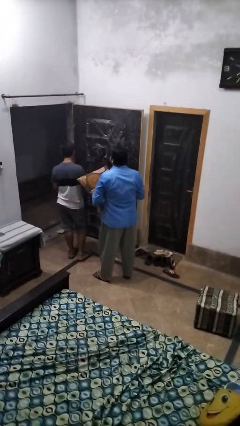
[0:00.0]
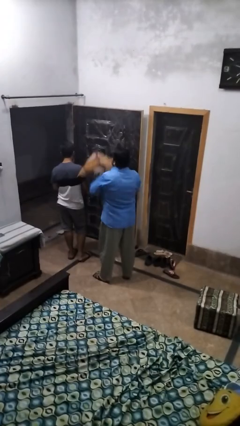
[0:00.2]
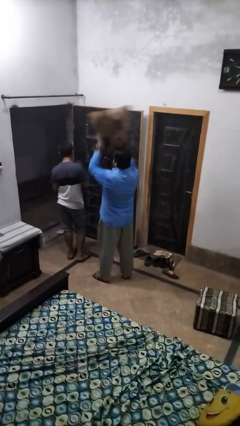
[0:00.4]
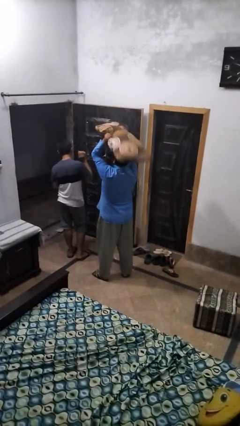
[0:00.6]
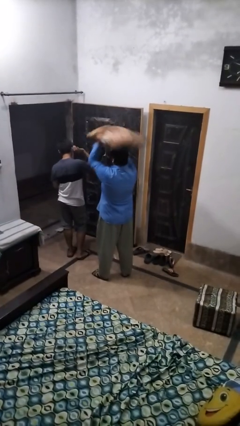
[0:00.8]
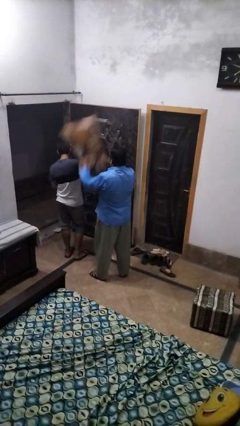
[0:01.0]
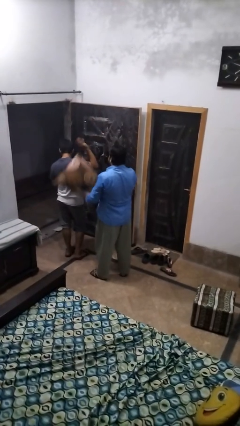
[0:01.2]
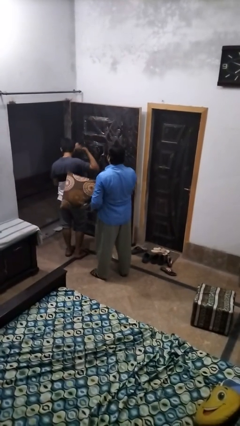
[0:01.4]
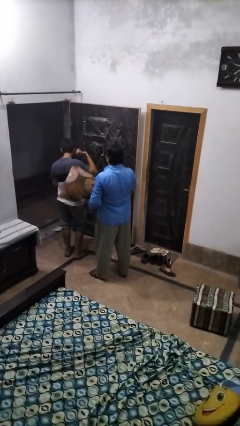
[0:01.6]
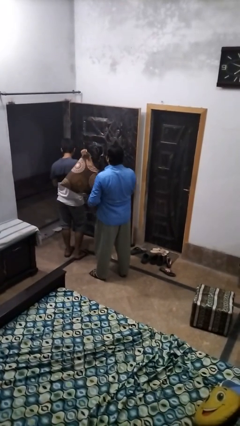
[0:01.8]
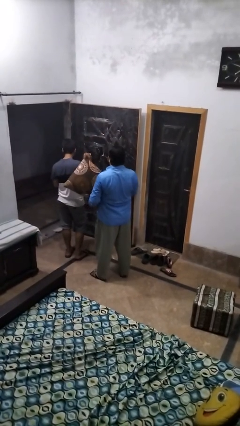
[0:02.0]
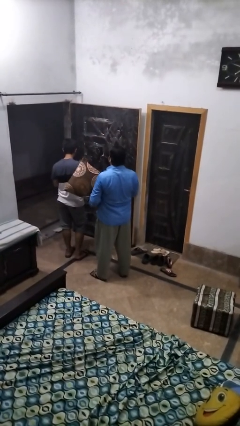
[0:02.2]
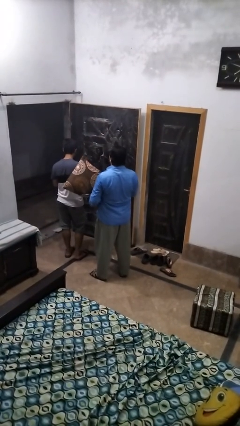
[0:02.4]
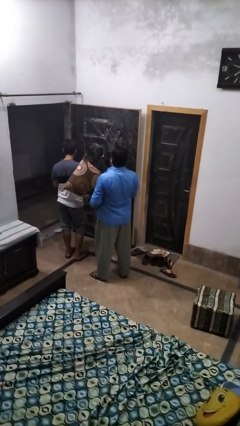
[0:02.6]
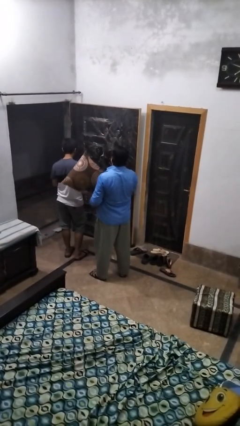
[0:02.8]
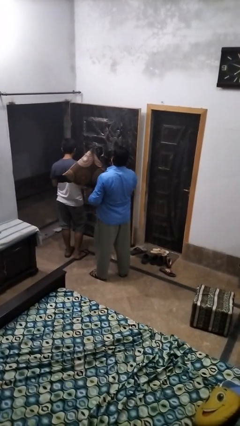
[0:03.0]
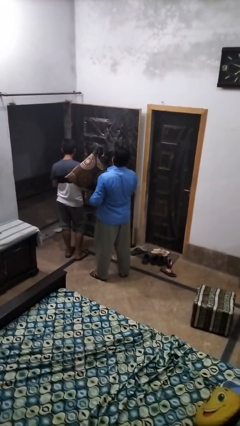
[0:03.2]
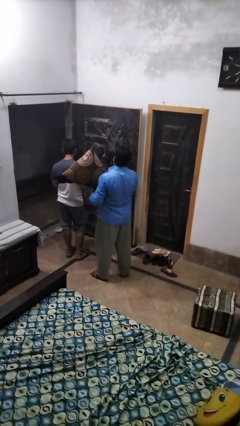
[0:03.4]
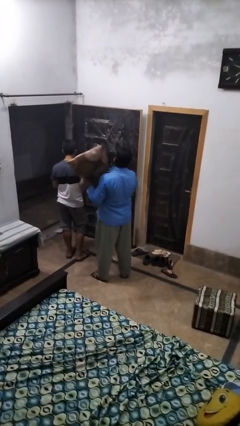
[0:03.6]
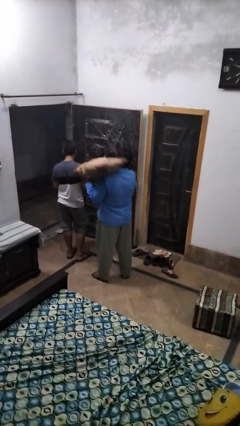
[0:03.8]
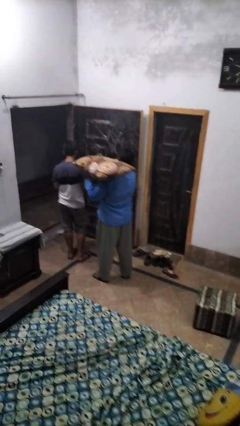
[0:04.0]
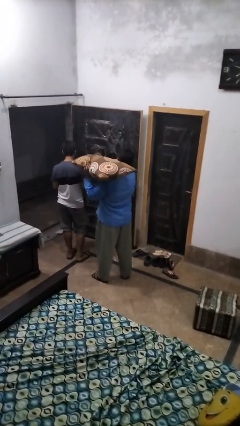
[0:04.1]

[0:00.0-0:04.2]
person hits person with pillow

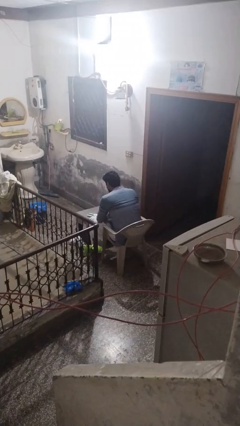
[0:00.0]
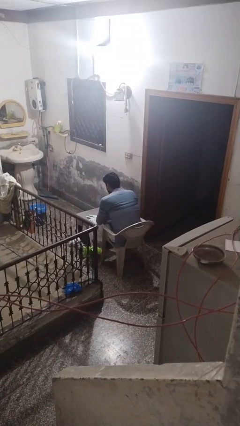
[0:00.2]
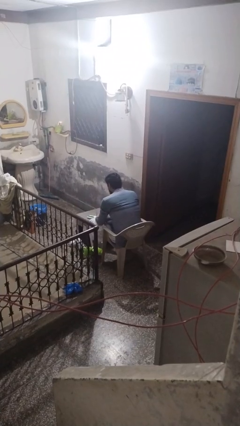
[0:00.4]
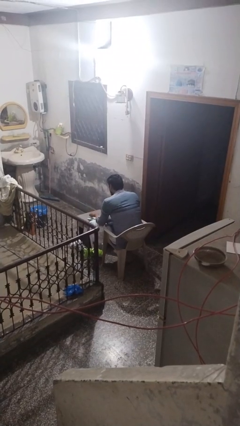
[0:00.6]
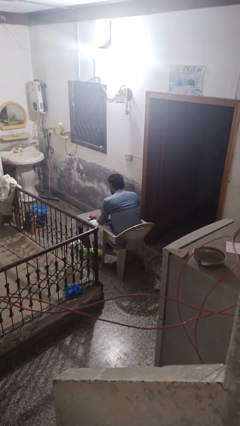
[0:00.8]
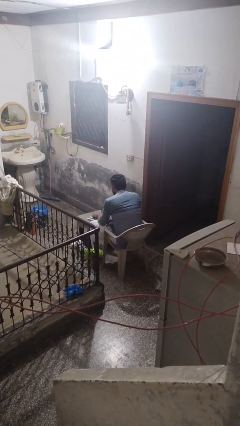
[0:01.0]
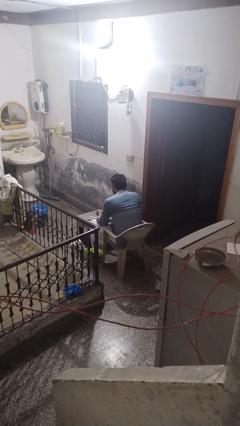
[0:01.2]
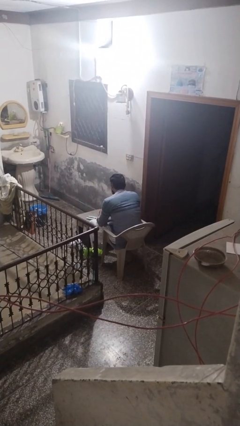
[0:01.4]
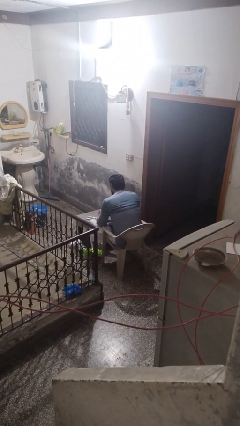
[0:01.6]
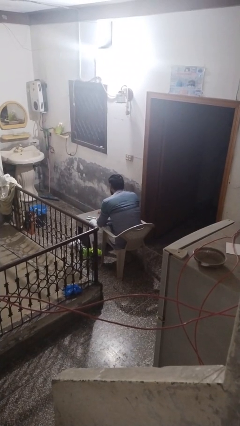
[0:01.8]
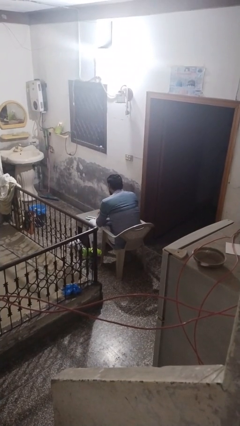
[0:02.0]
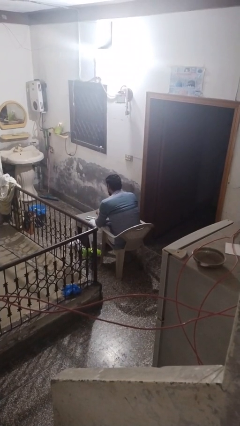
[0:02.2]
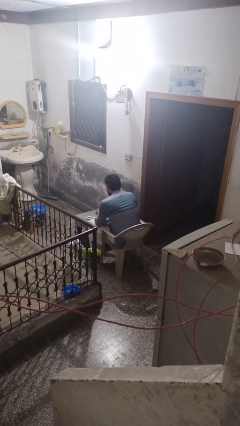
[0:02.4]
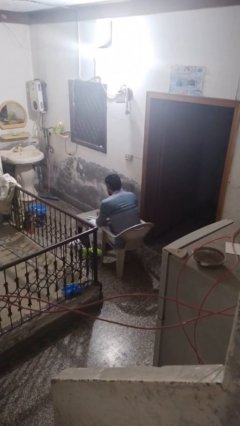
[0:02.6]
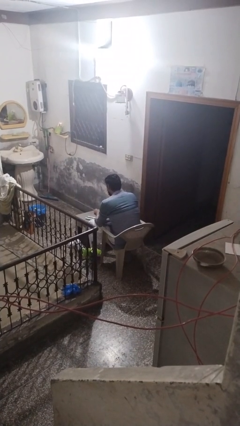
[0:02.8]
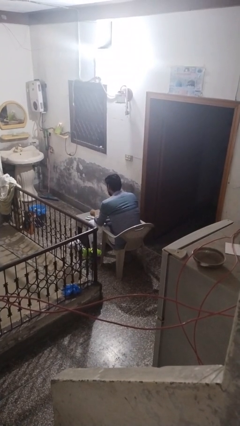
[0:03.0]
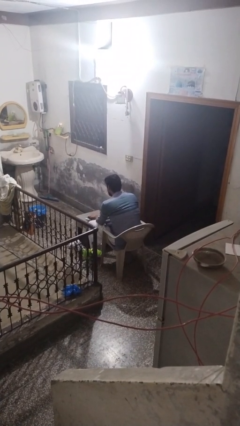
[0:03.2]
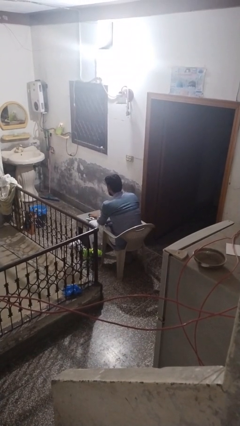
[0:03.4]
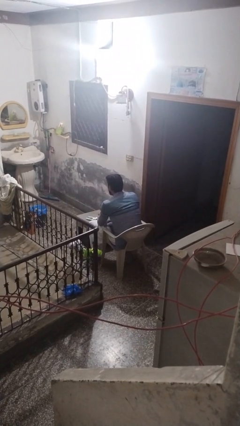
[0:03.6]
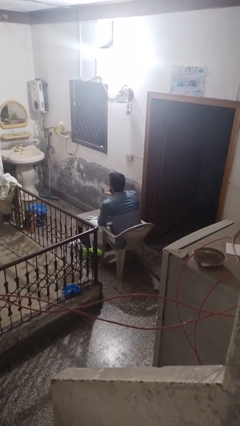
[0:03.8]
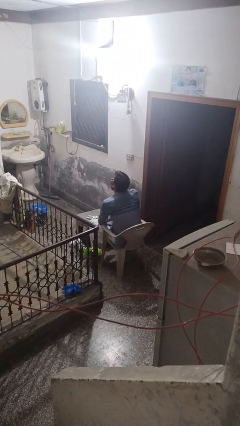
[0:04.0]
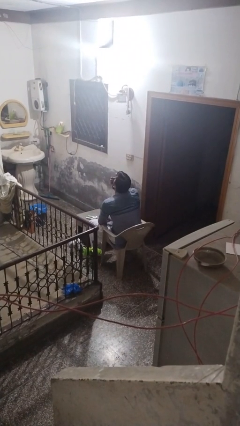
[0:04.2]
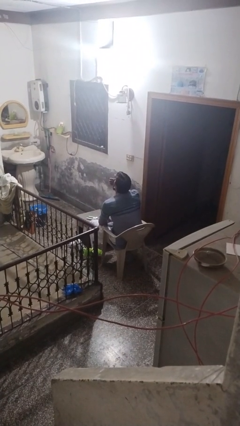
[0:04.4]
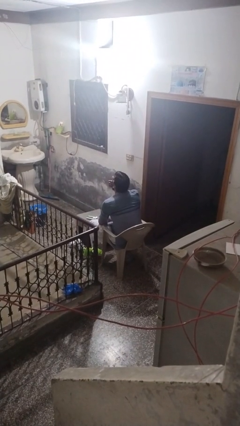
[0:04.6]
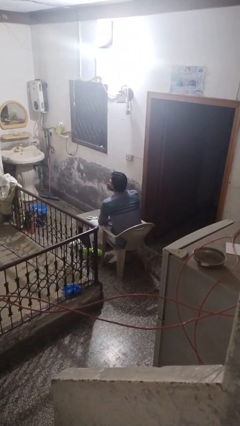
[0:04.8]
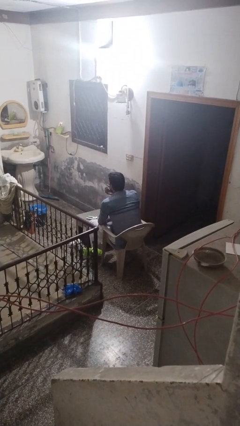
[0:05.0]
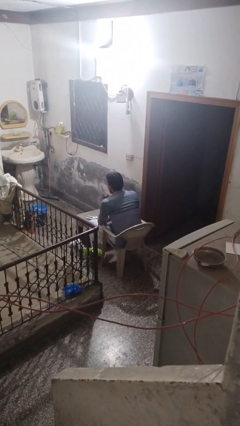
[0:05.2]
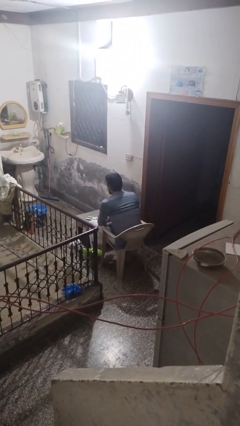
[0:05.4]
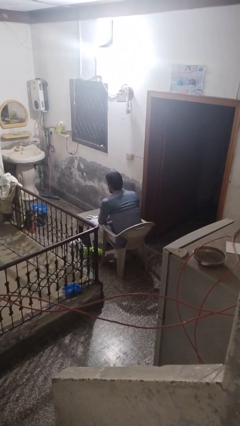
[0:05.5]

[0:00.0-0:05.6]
person takes medicine pills

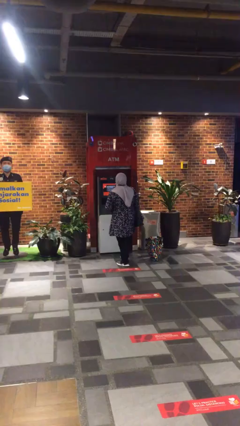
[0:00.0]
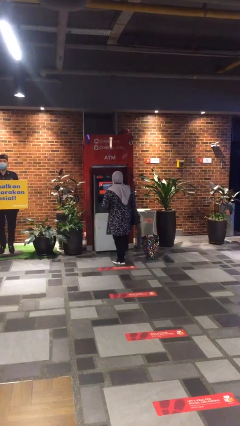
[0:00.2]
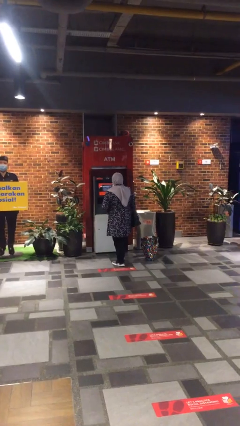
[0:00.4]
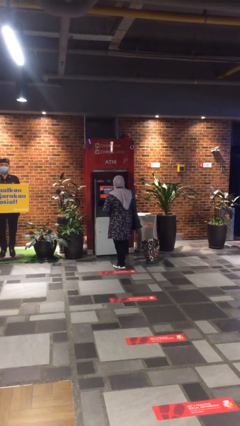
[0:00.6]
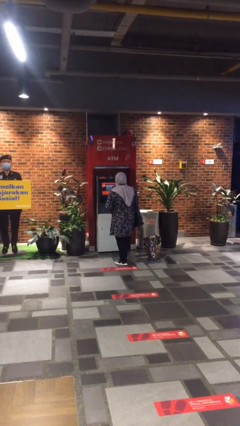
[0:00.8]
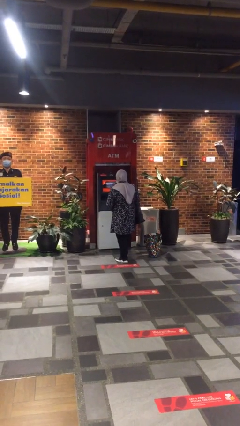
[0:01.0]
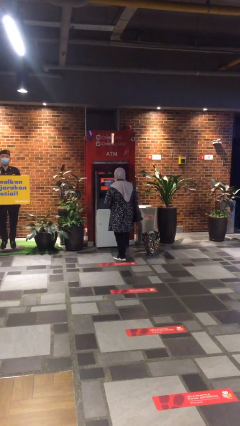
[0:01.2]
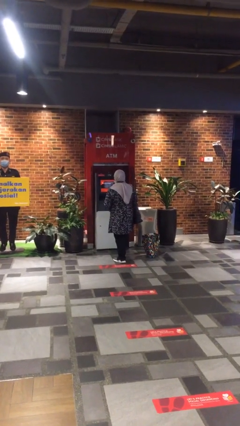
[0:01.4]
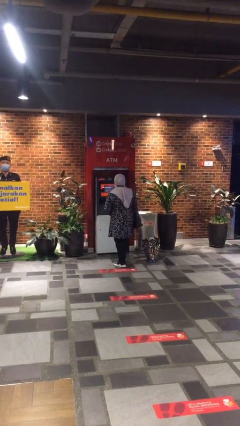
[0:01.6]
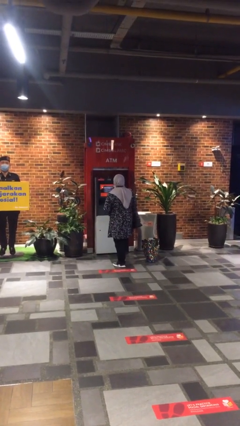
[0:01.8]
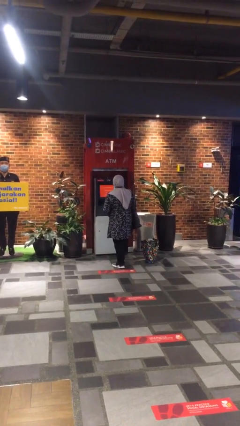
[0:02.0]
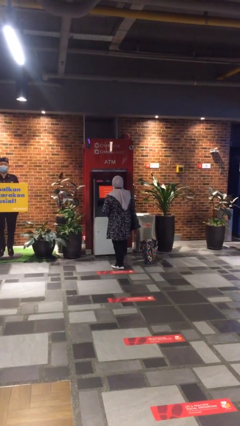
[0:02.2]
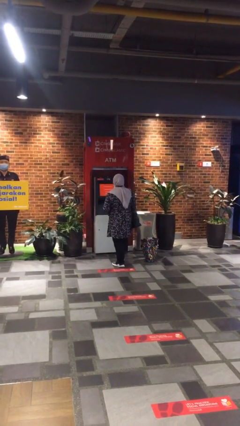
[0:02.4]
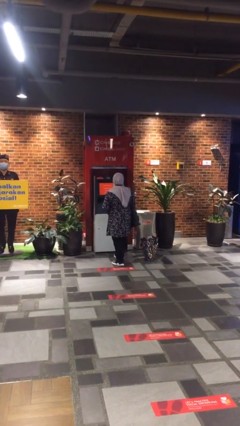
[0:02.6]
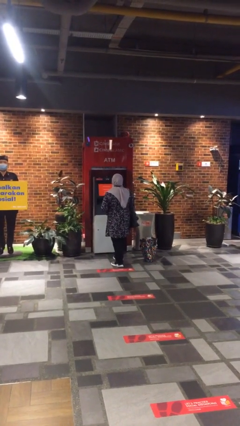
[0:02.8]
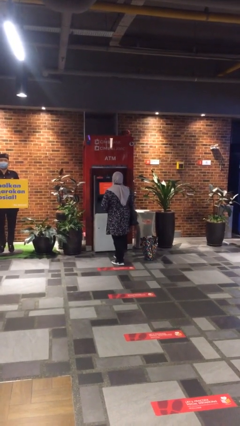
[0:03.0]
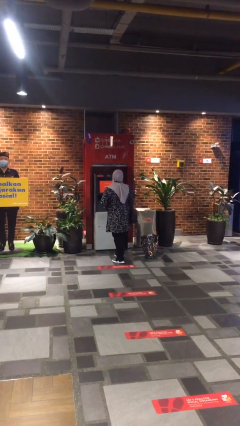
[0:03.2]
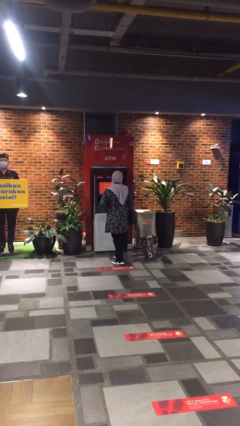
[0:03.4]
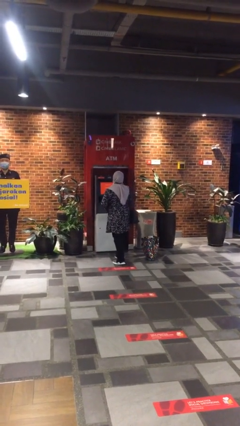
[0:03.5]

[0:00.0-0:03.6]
person purchases from machine

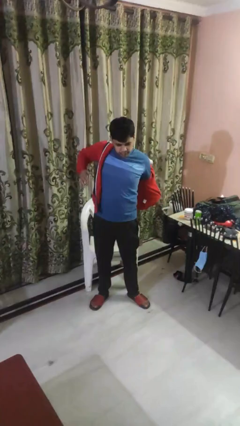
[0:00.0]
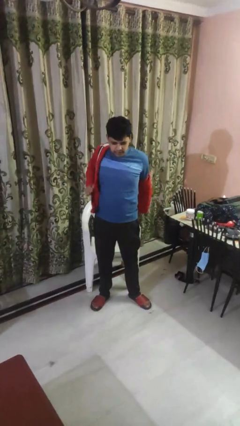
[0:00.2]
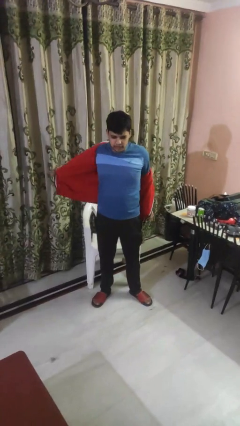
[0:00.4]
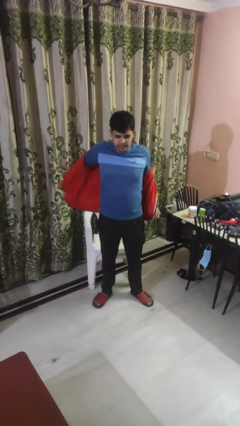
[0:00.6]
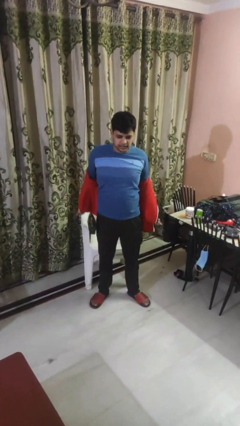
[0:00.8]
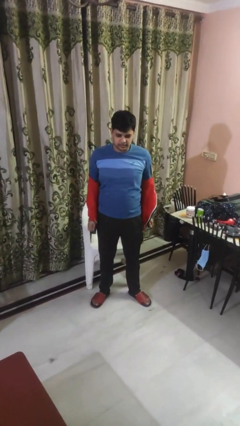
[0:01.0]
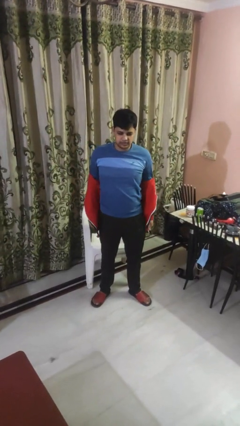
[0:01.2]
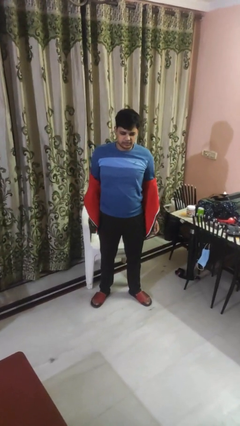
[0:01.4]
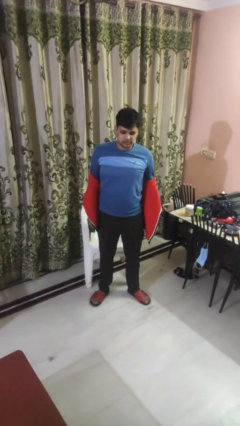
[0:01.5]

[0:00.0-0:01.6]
person takes off hoodie

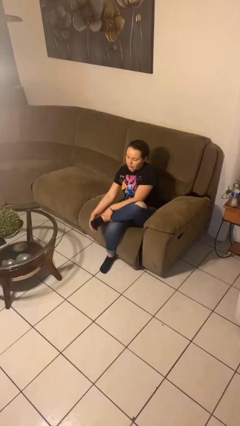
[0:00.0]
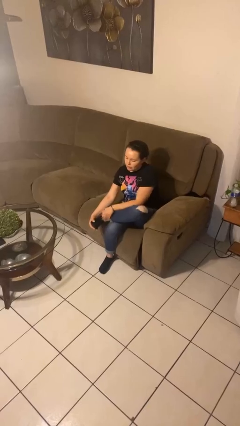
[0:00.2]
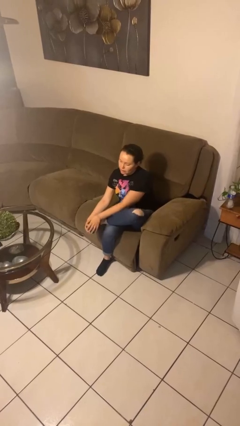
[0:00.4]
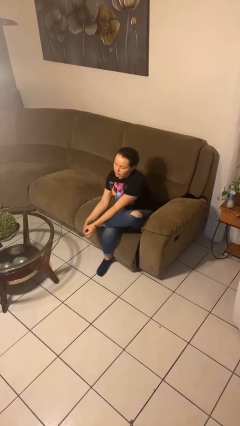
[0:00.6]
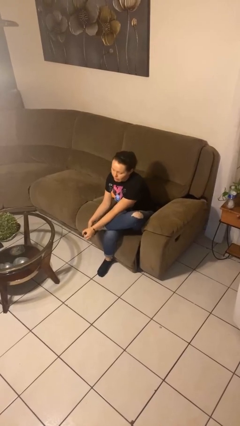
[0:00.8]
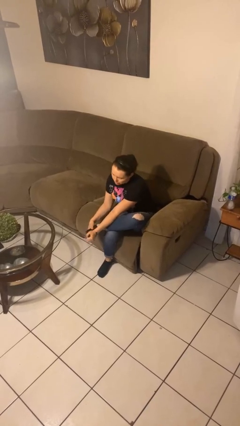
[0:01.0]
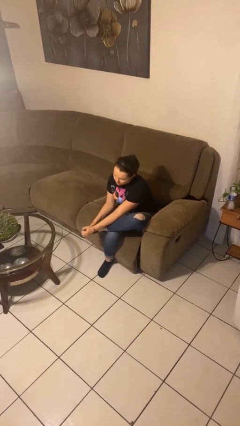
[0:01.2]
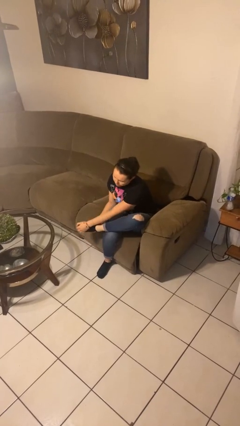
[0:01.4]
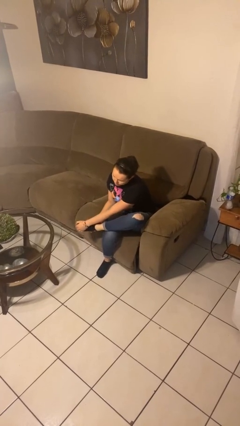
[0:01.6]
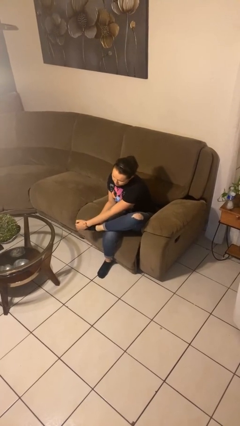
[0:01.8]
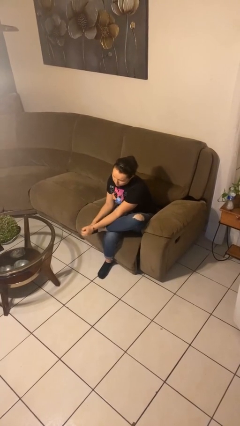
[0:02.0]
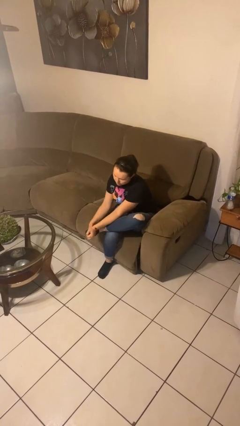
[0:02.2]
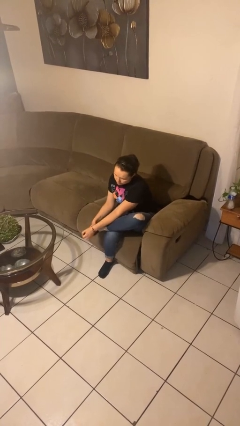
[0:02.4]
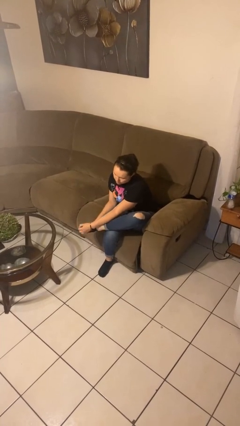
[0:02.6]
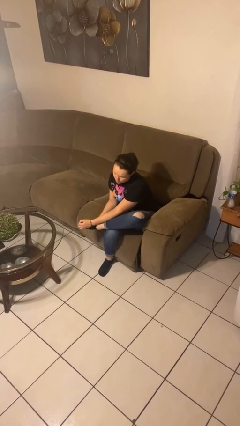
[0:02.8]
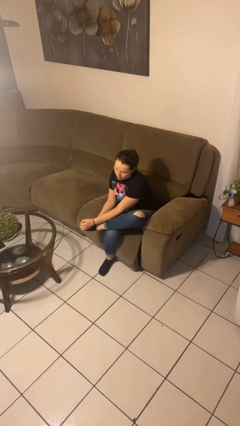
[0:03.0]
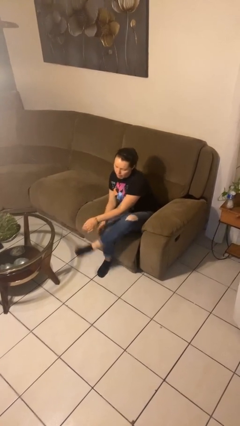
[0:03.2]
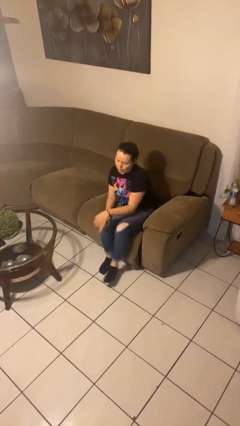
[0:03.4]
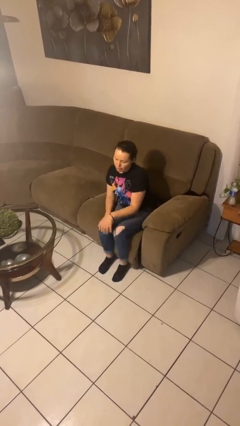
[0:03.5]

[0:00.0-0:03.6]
person rubs foot
